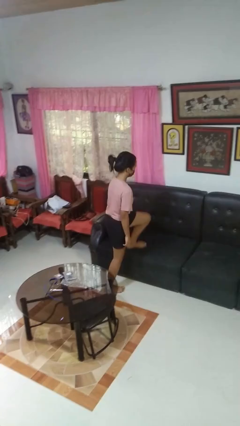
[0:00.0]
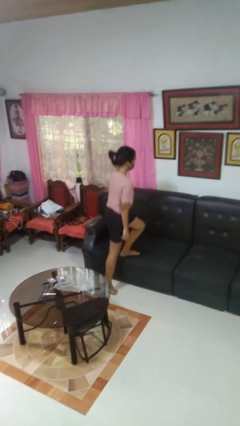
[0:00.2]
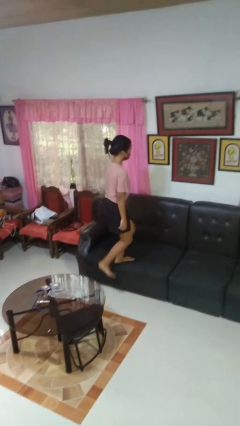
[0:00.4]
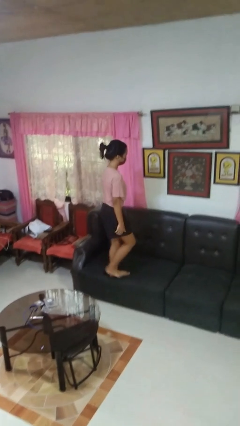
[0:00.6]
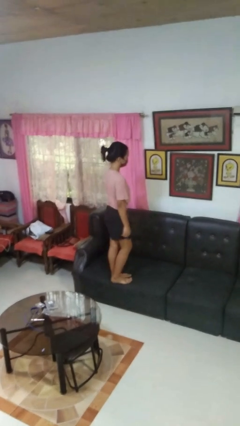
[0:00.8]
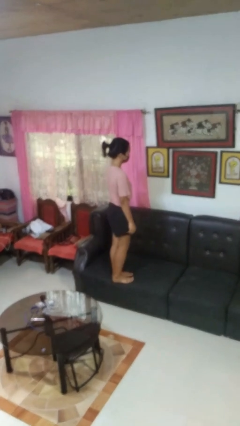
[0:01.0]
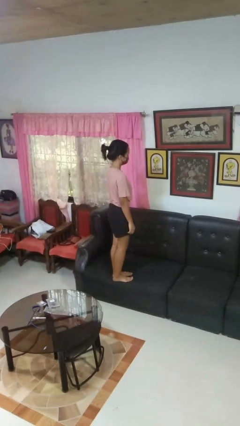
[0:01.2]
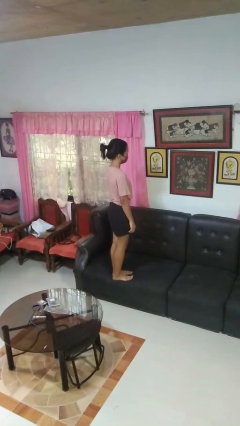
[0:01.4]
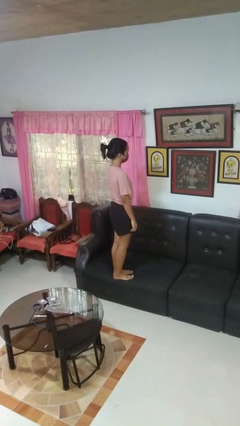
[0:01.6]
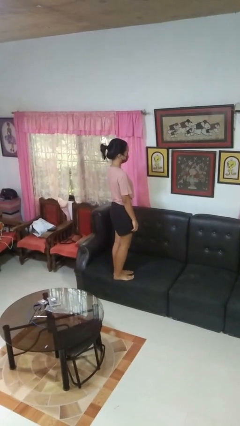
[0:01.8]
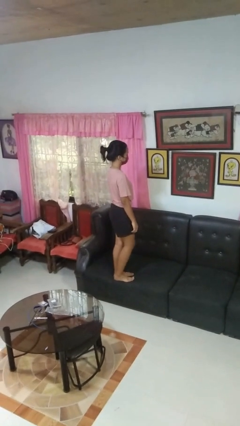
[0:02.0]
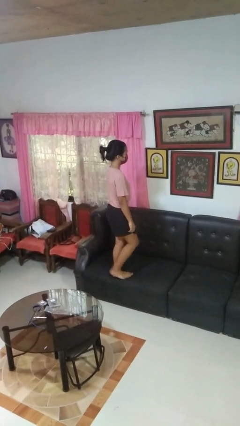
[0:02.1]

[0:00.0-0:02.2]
person climbs on couch

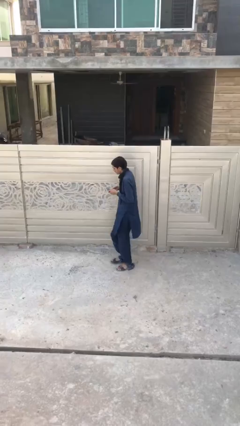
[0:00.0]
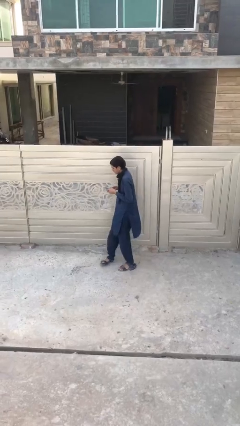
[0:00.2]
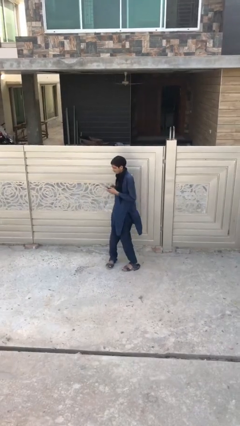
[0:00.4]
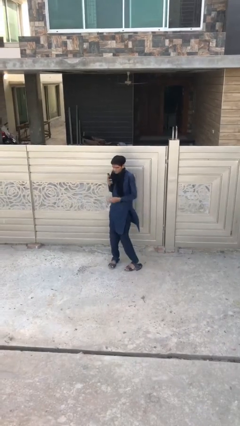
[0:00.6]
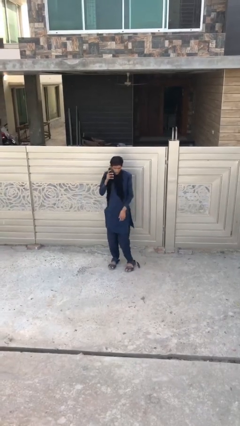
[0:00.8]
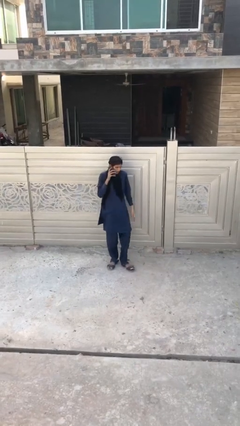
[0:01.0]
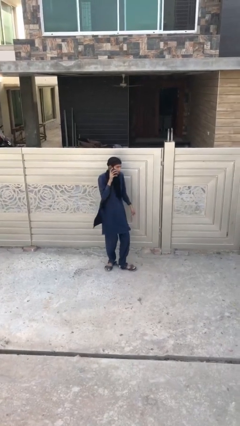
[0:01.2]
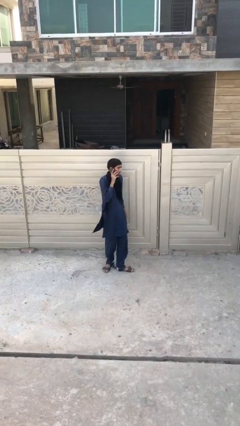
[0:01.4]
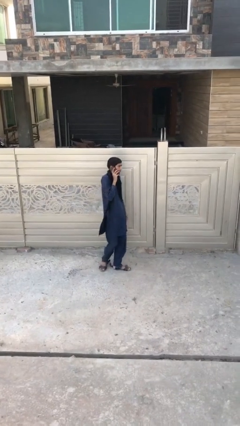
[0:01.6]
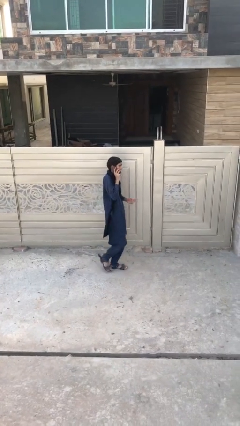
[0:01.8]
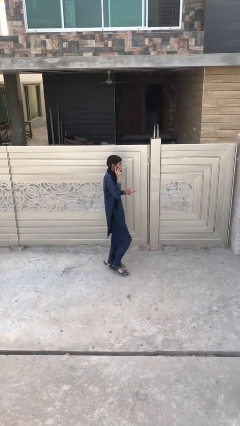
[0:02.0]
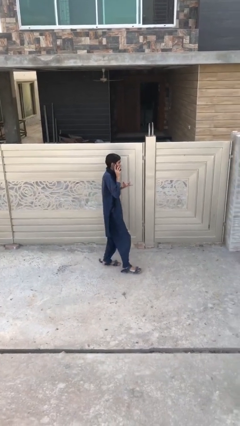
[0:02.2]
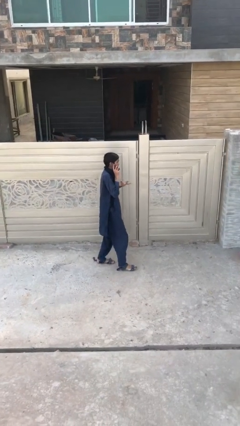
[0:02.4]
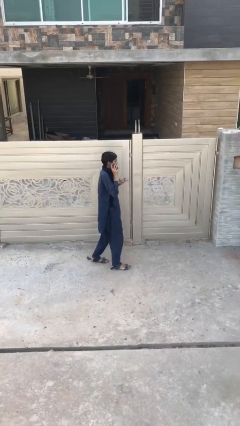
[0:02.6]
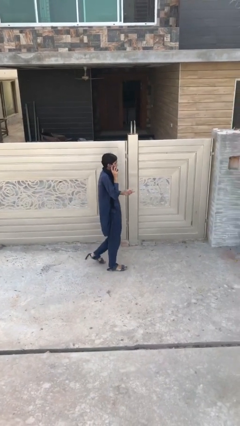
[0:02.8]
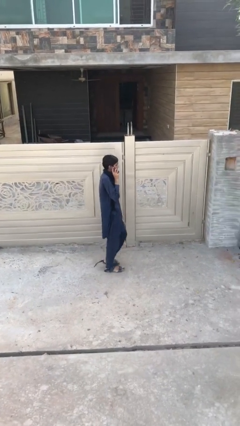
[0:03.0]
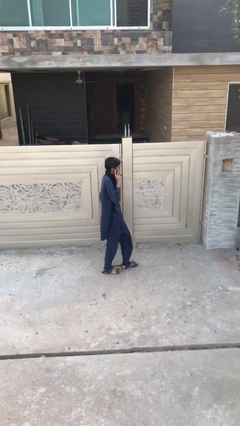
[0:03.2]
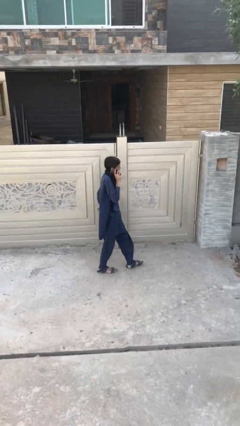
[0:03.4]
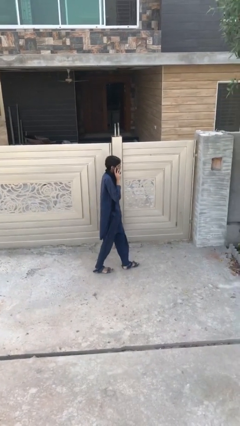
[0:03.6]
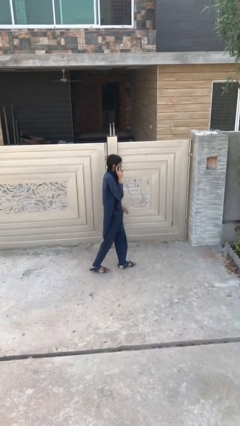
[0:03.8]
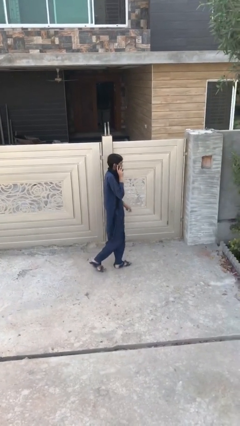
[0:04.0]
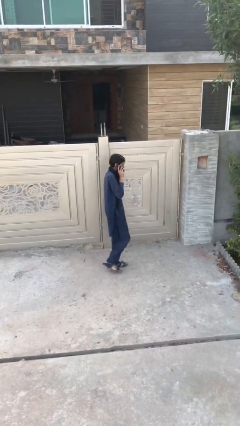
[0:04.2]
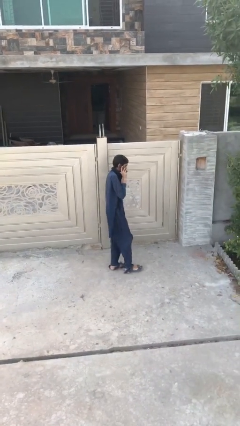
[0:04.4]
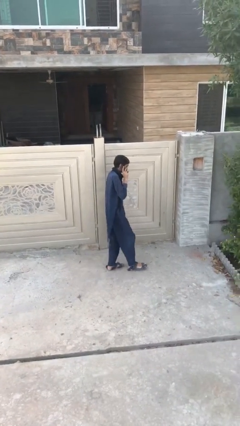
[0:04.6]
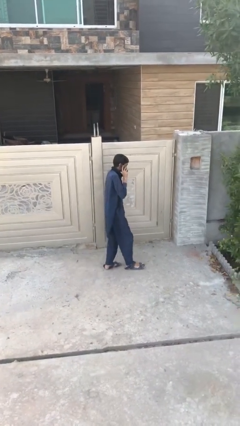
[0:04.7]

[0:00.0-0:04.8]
person talks on phone

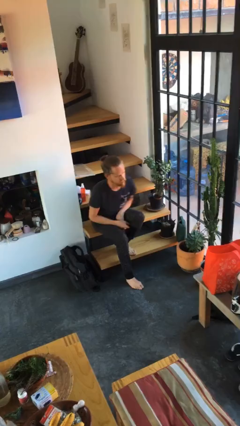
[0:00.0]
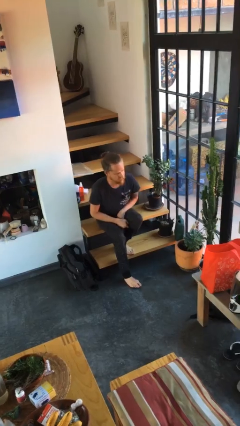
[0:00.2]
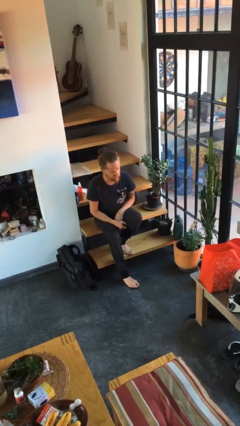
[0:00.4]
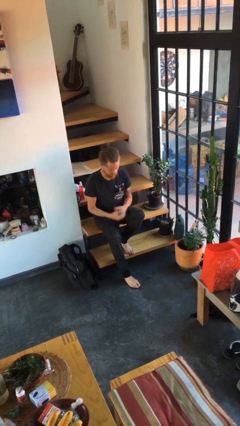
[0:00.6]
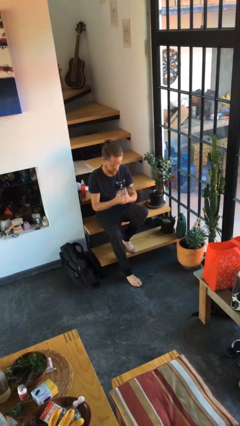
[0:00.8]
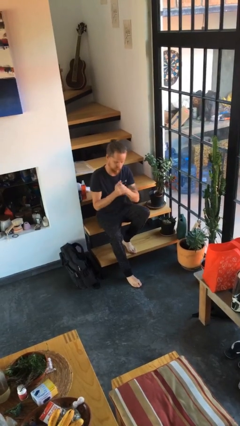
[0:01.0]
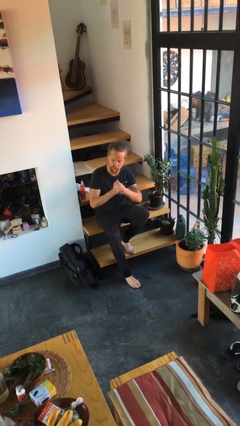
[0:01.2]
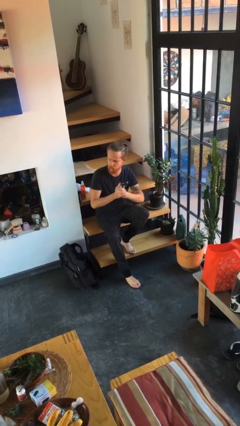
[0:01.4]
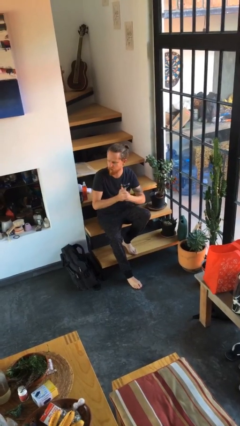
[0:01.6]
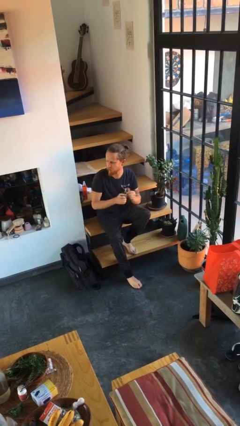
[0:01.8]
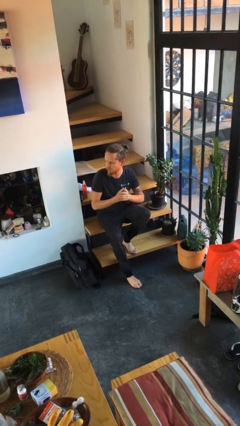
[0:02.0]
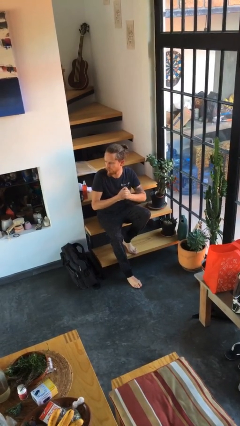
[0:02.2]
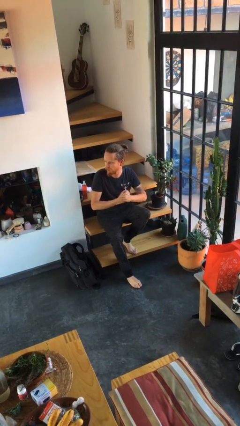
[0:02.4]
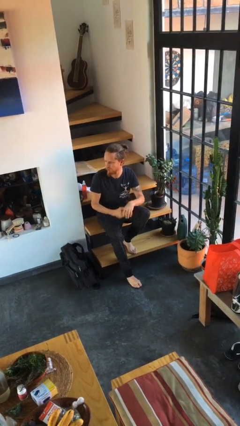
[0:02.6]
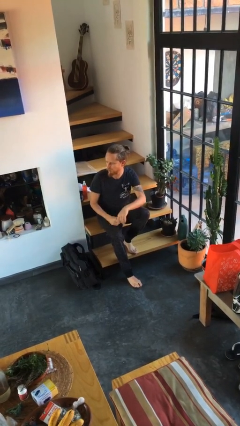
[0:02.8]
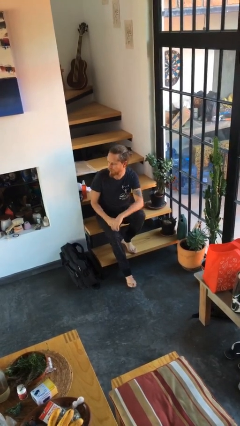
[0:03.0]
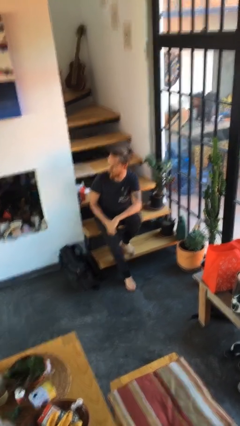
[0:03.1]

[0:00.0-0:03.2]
person cracks knuckles

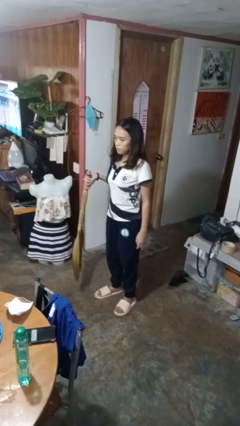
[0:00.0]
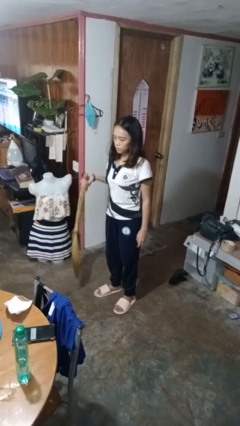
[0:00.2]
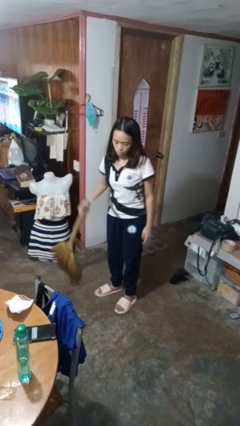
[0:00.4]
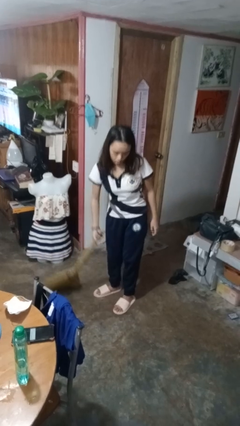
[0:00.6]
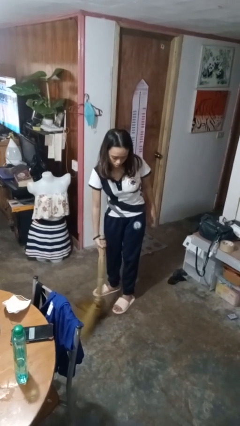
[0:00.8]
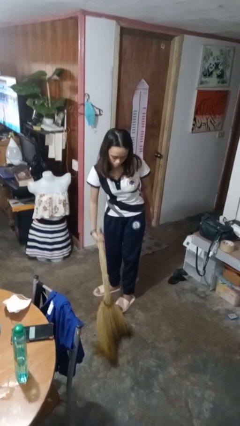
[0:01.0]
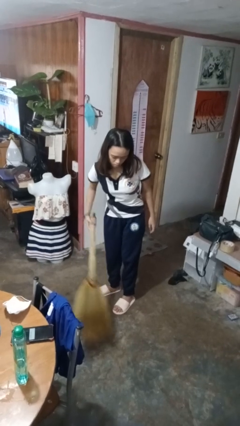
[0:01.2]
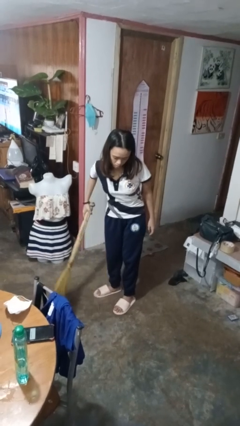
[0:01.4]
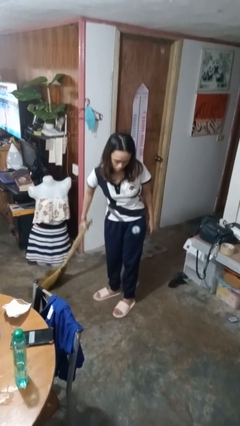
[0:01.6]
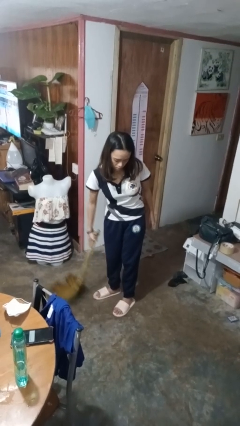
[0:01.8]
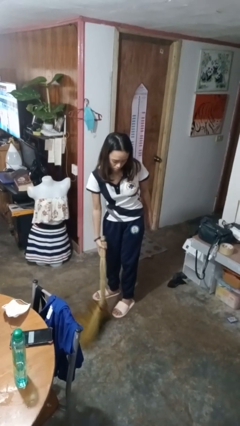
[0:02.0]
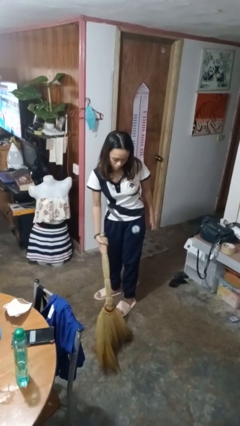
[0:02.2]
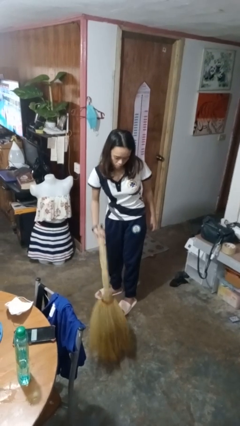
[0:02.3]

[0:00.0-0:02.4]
person sweeps floor

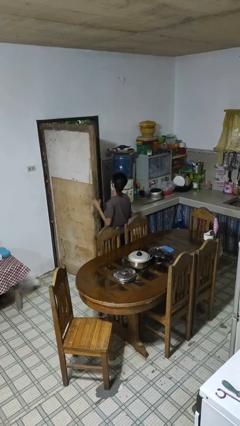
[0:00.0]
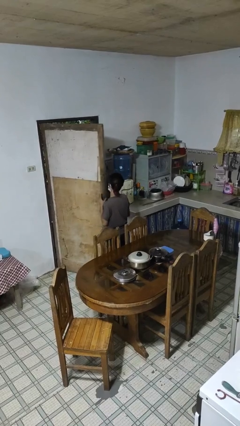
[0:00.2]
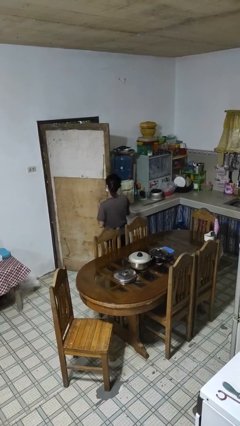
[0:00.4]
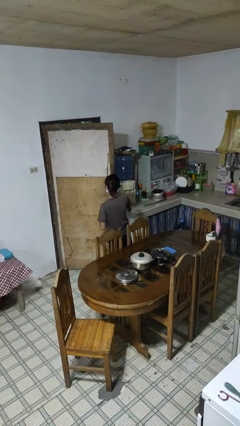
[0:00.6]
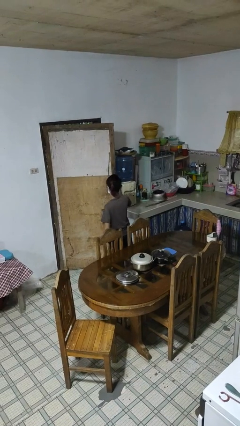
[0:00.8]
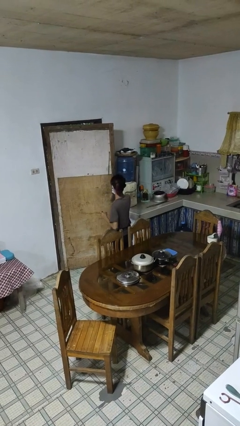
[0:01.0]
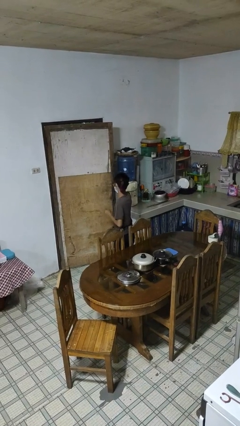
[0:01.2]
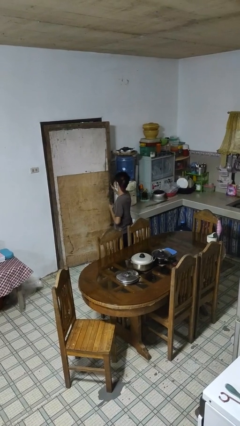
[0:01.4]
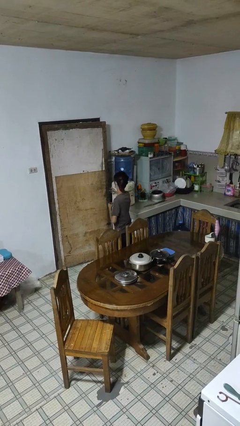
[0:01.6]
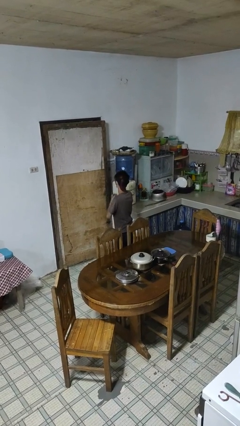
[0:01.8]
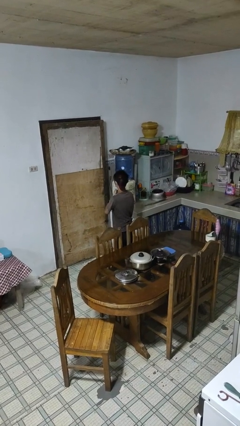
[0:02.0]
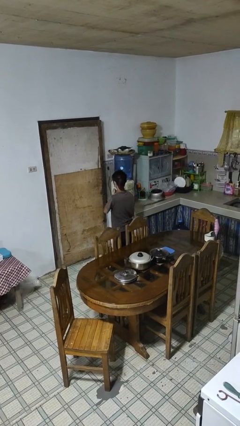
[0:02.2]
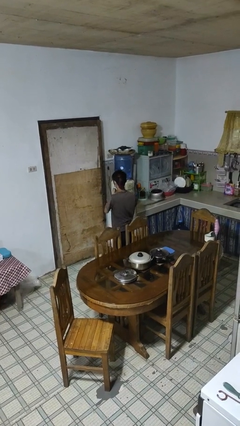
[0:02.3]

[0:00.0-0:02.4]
person closes facility door

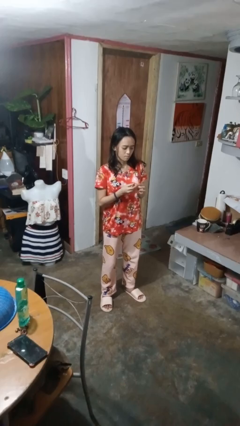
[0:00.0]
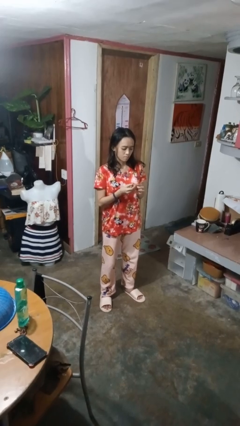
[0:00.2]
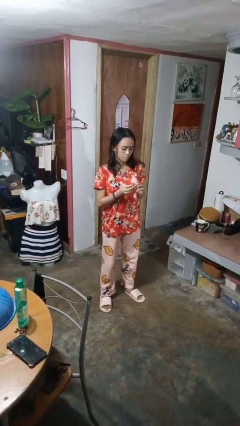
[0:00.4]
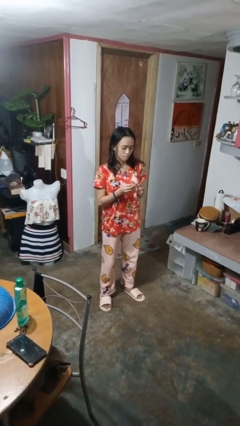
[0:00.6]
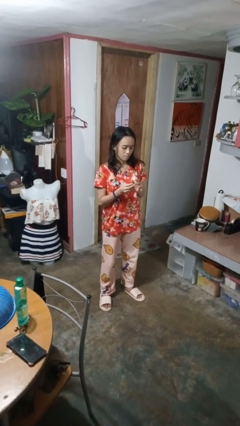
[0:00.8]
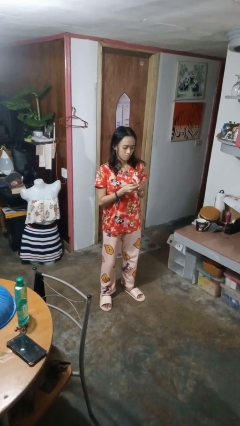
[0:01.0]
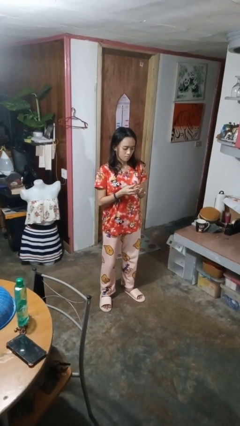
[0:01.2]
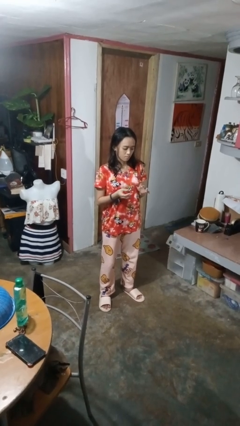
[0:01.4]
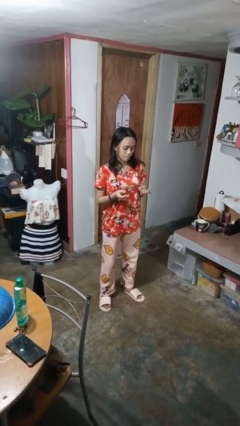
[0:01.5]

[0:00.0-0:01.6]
person puts on ring

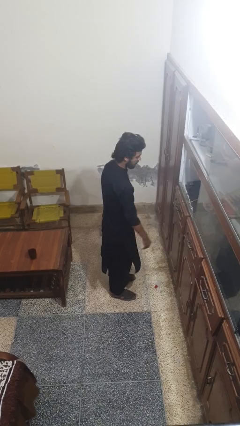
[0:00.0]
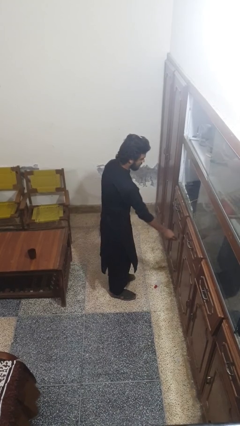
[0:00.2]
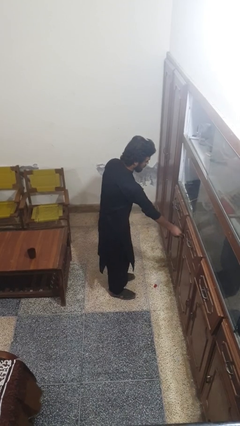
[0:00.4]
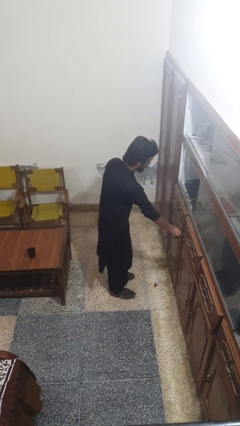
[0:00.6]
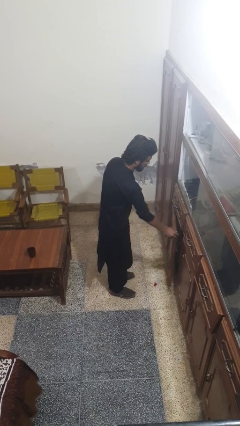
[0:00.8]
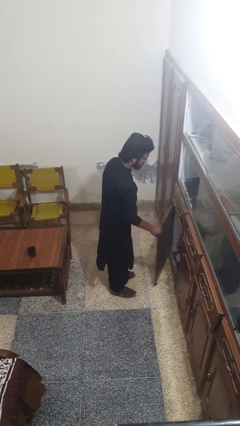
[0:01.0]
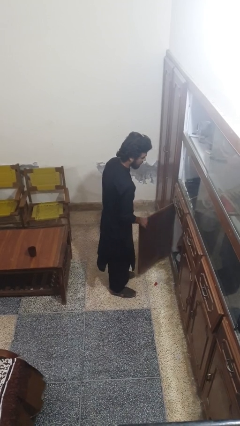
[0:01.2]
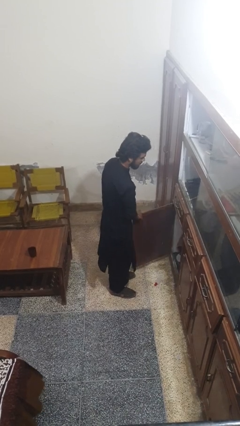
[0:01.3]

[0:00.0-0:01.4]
person opens cabinet
